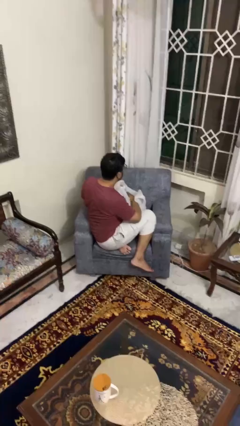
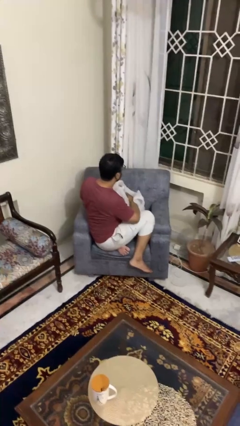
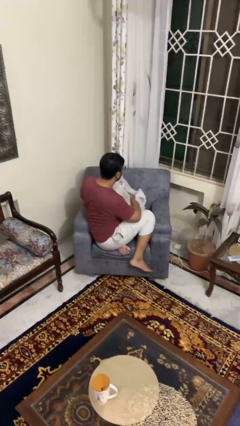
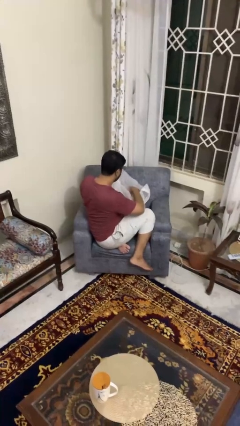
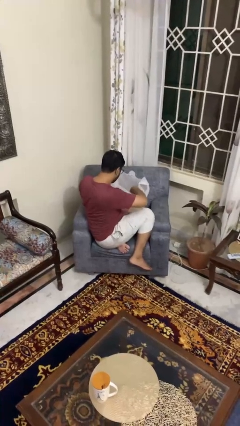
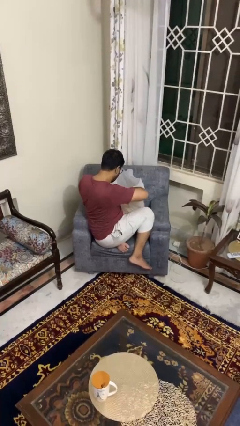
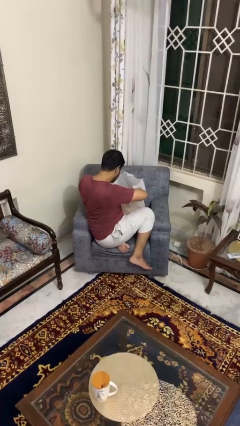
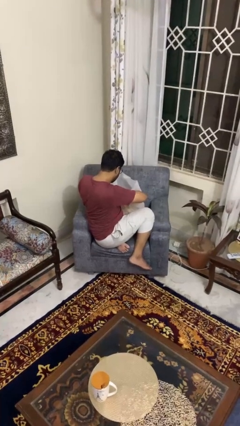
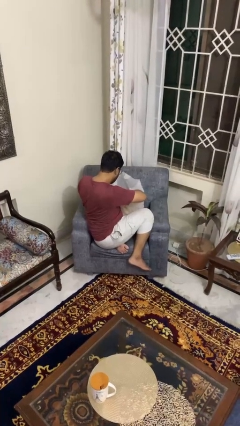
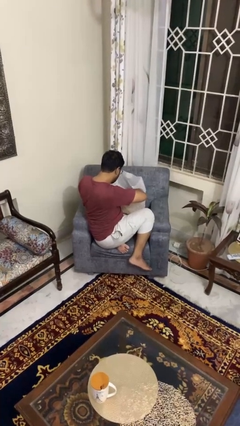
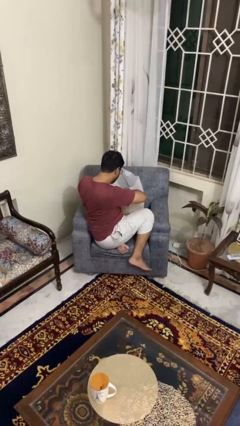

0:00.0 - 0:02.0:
person searches in bag

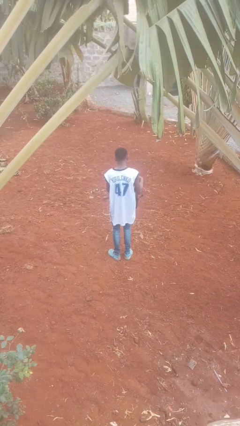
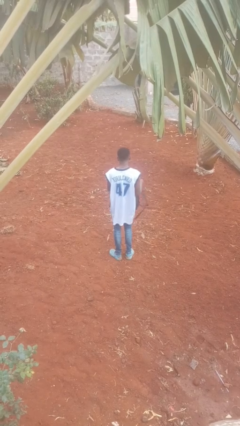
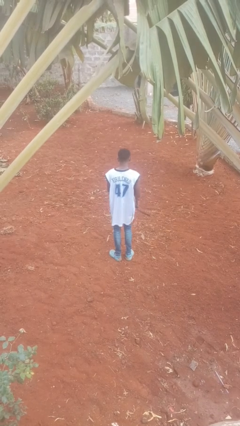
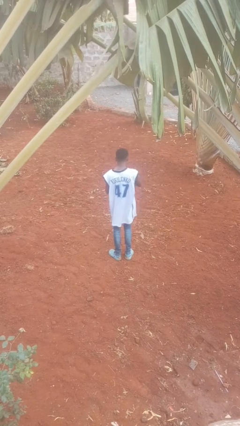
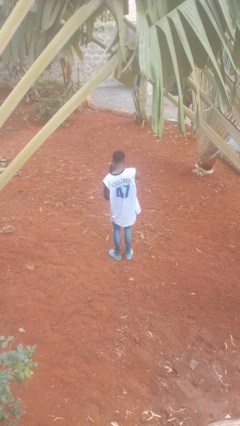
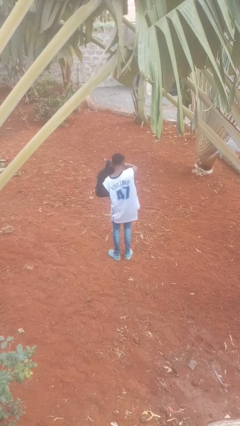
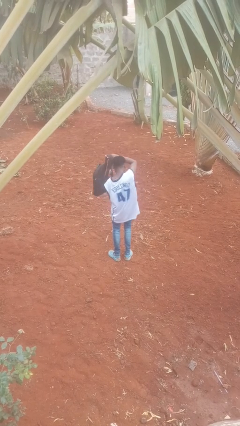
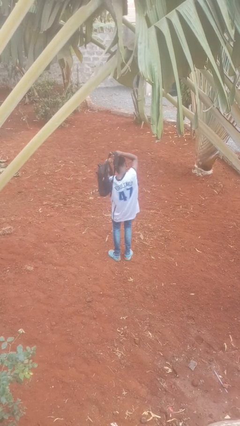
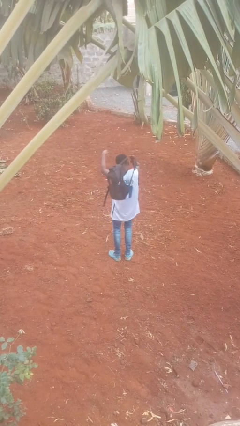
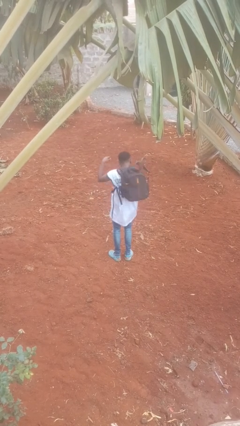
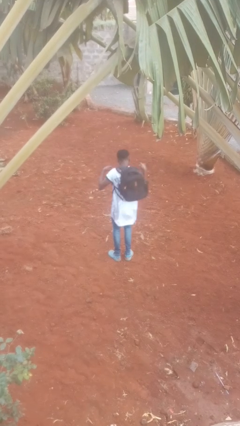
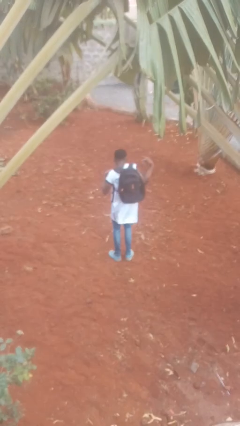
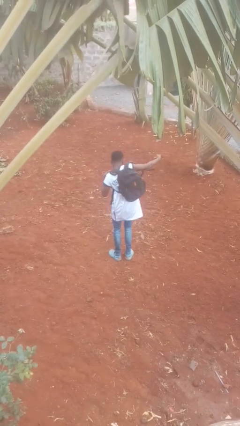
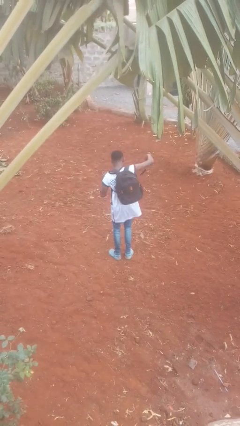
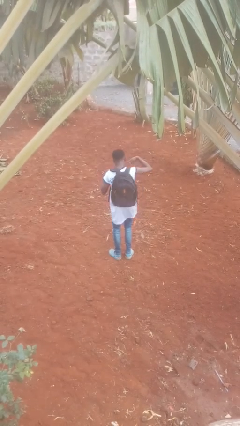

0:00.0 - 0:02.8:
person puts on backpack

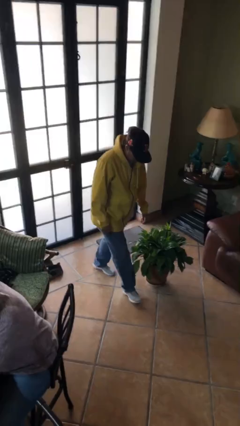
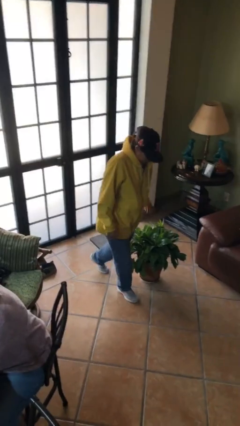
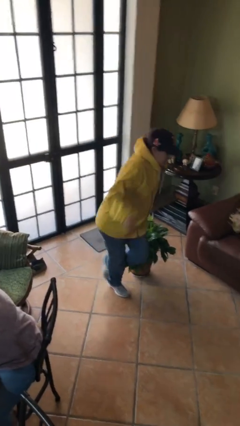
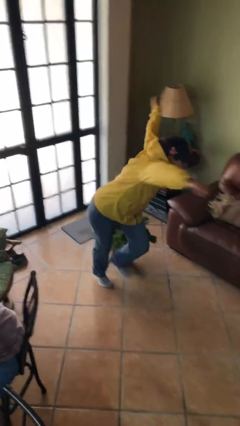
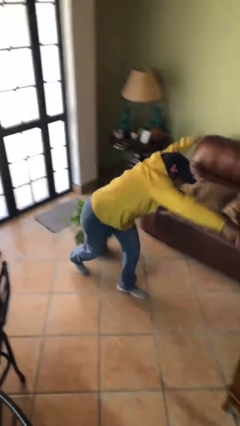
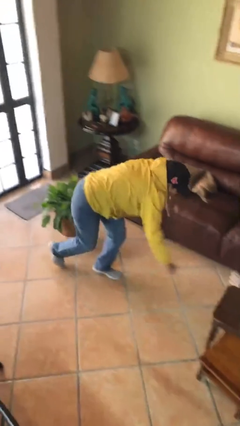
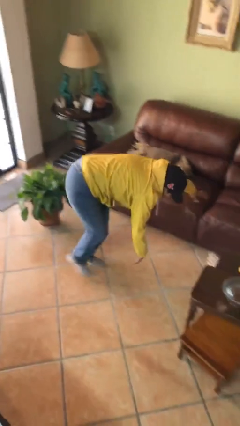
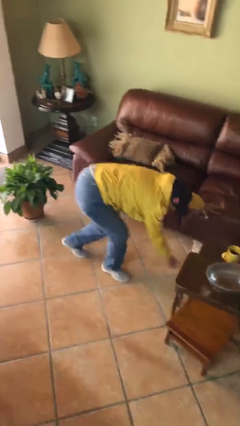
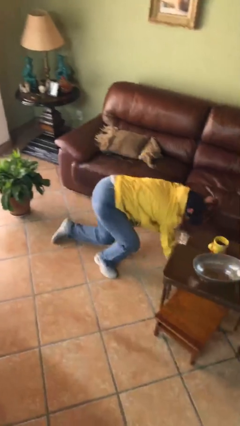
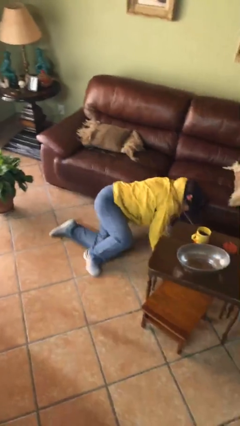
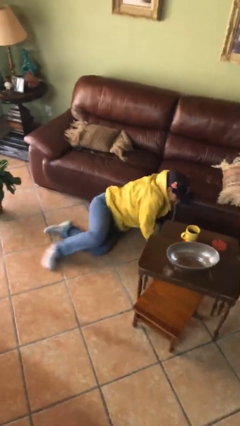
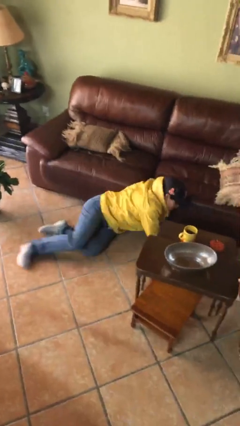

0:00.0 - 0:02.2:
person trips on object on floor

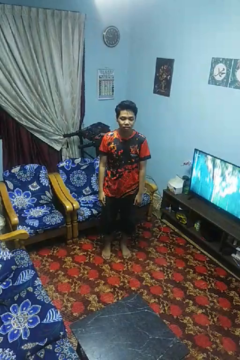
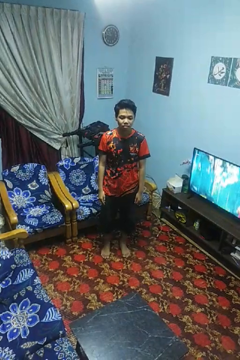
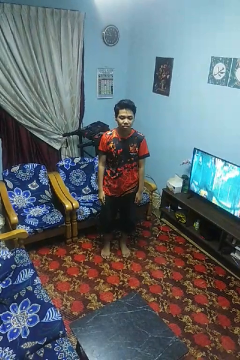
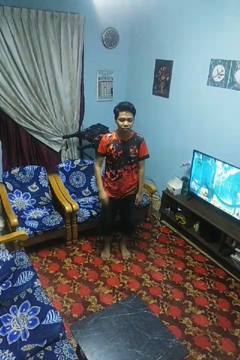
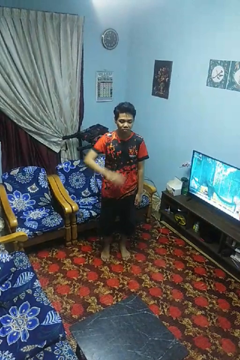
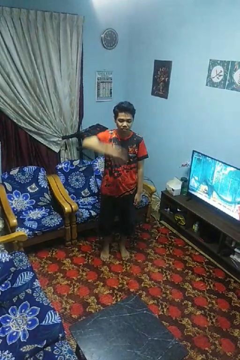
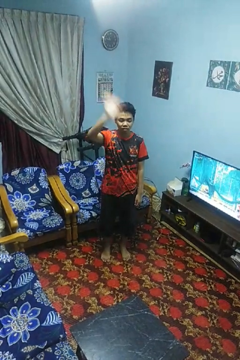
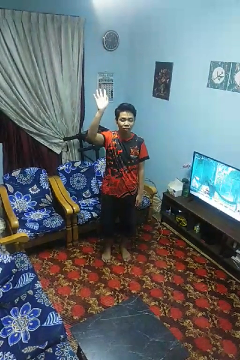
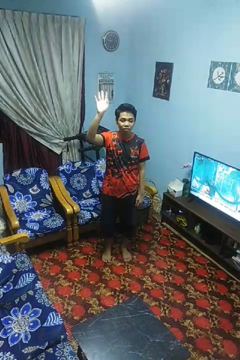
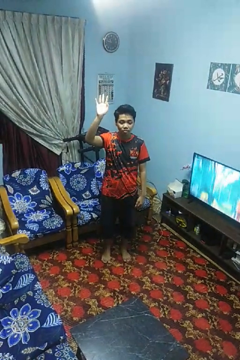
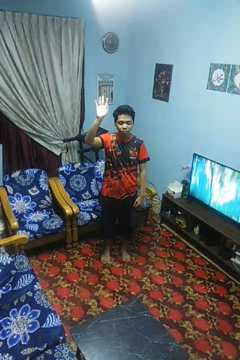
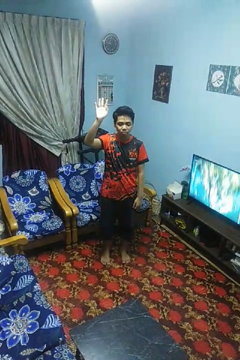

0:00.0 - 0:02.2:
person gestures swipe up

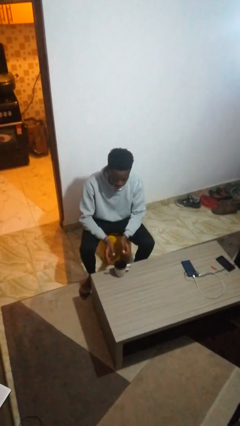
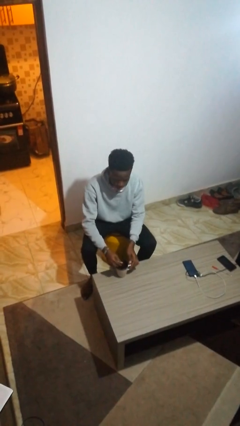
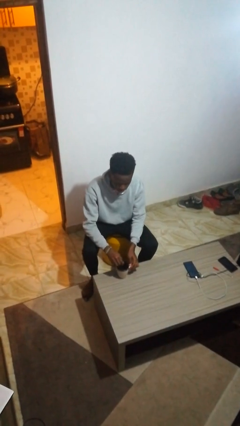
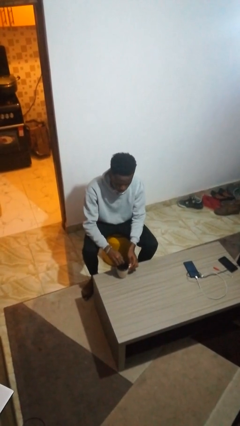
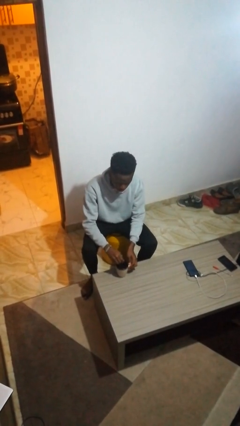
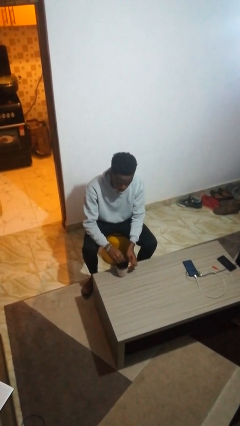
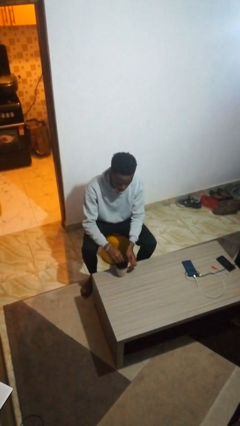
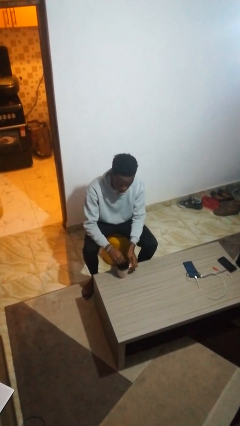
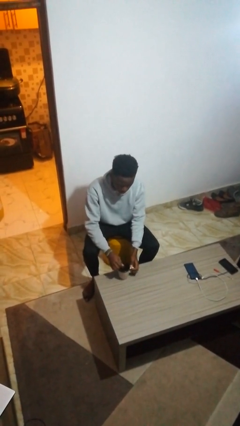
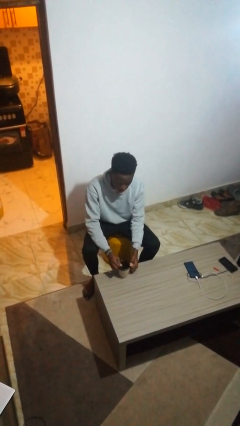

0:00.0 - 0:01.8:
person stirs mug

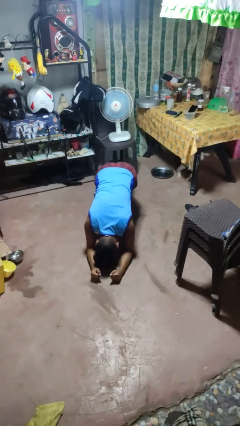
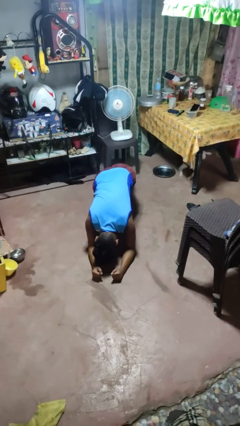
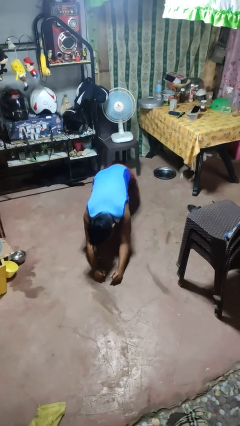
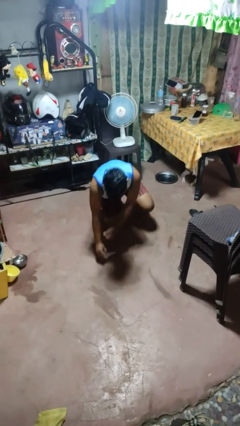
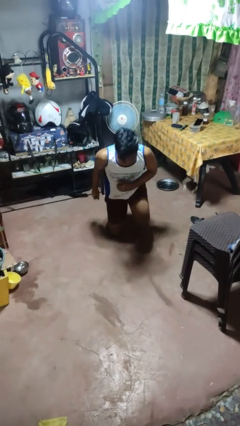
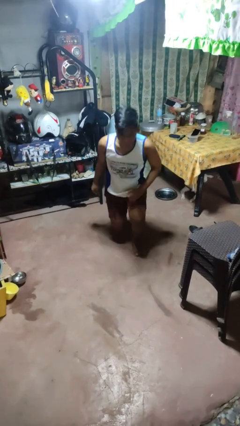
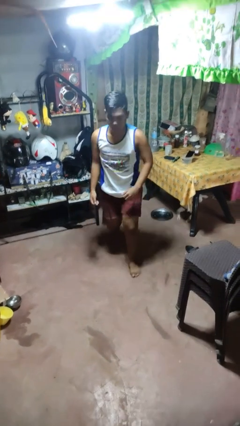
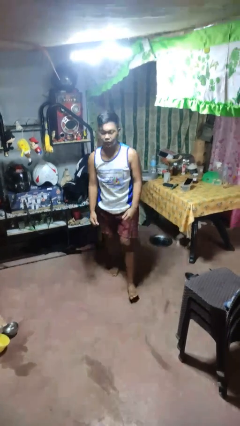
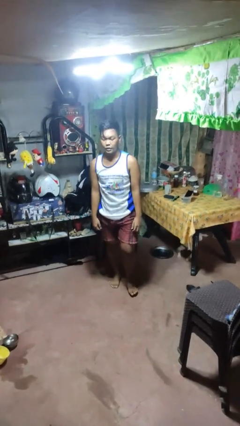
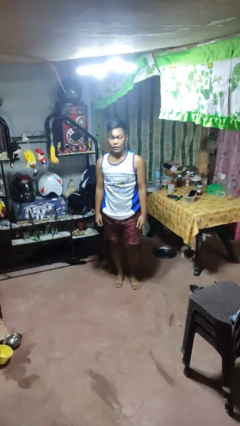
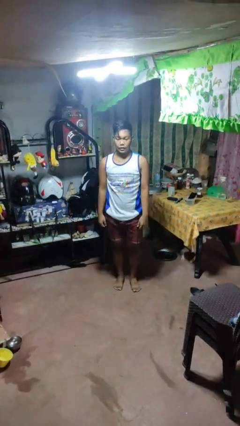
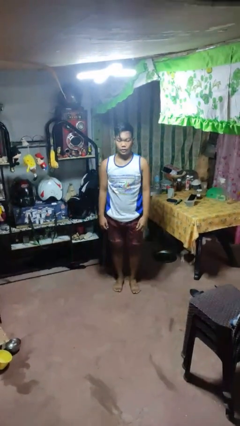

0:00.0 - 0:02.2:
person stands up from floor

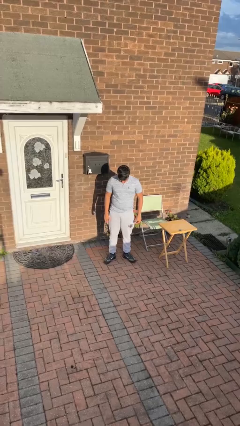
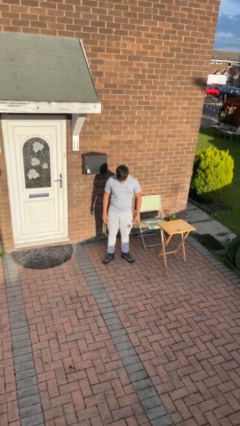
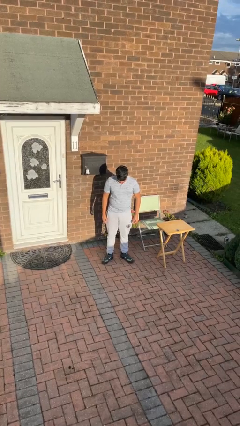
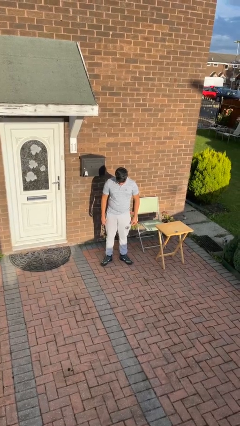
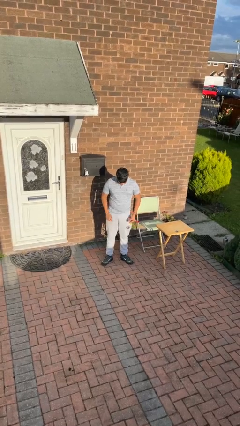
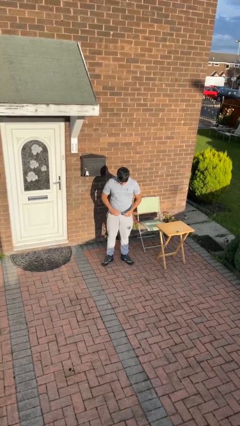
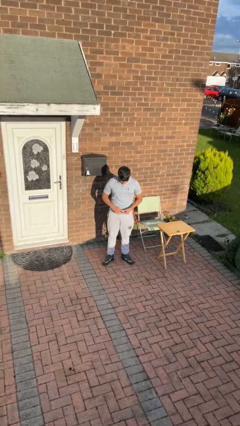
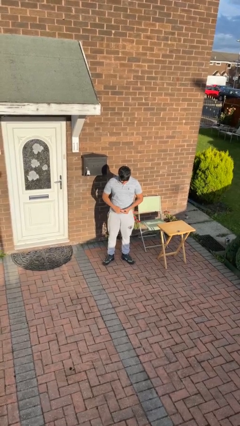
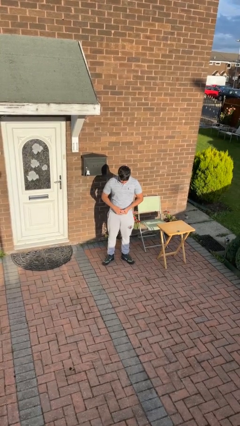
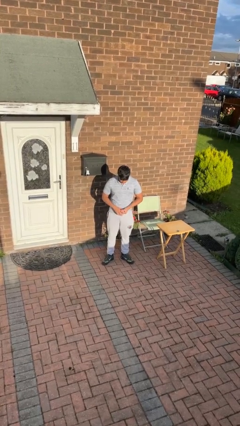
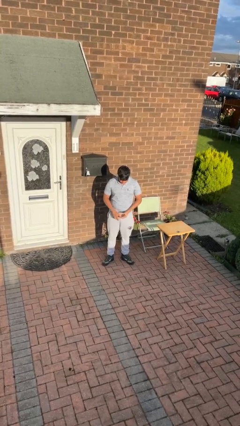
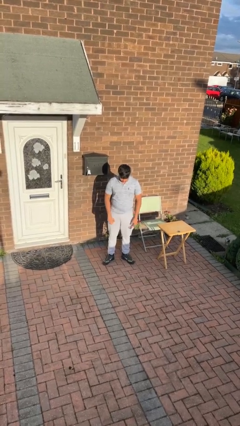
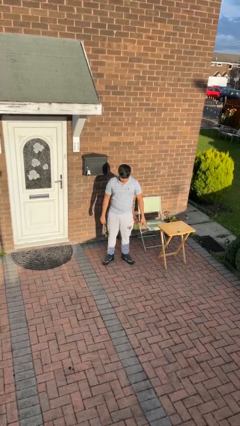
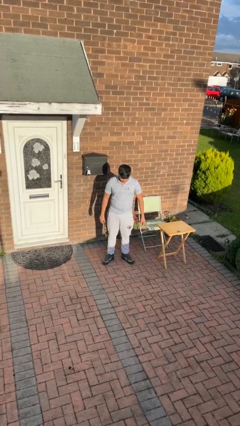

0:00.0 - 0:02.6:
person puts on ring

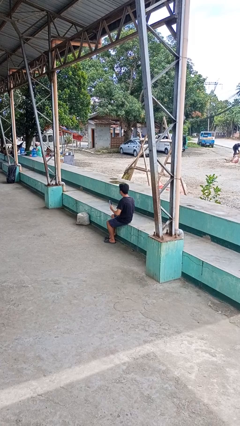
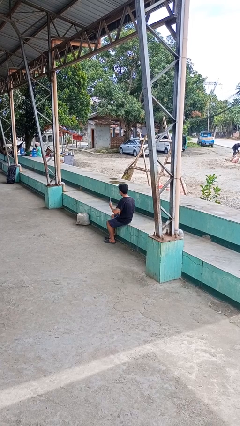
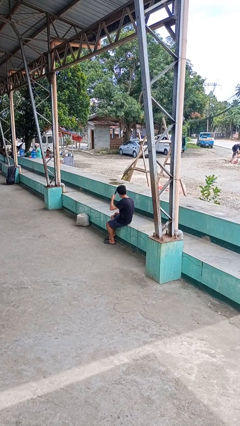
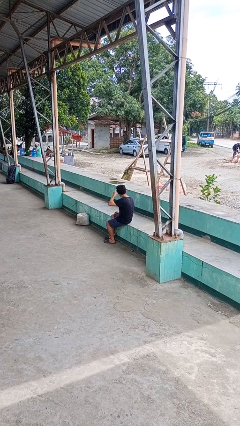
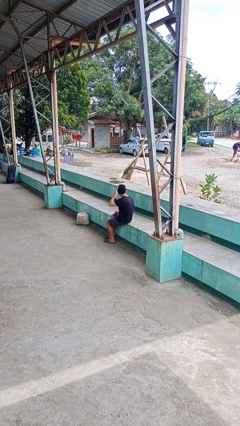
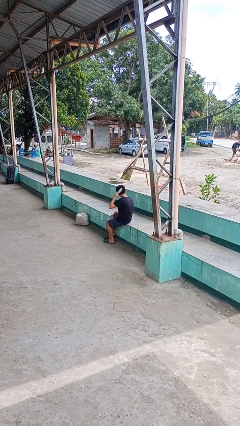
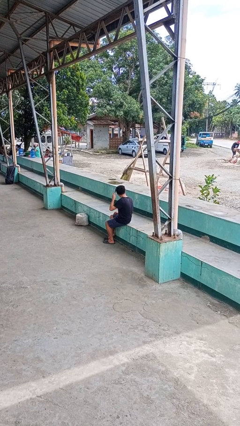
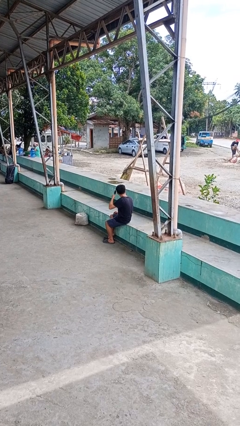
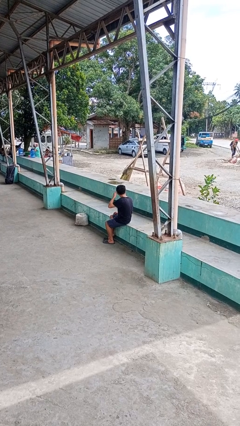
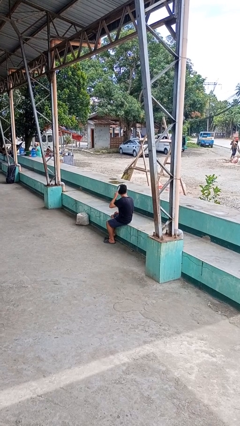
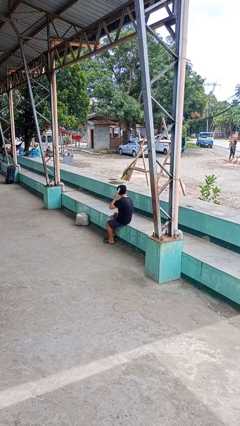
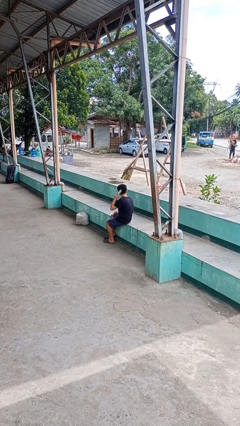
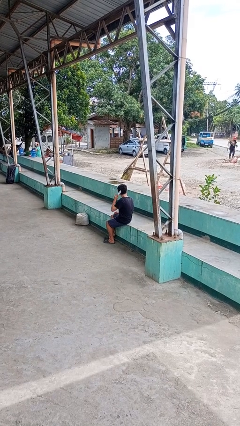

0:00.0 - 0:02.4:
person brushes hair
